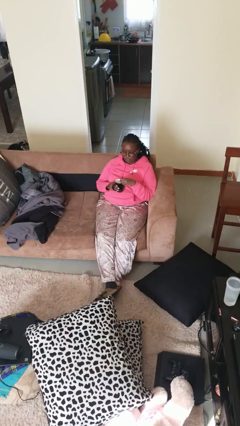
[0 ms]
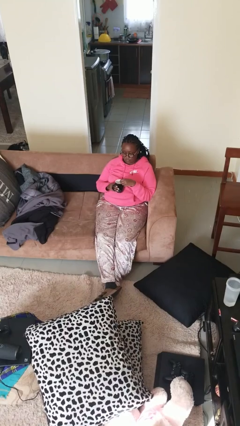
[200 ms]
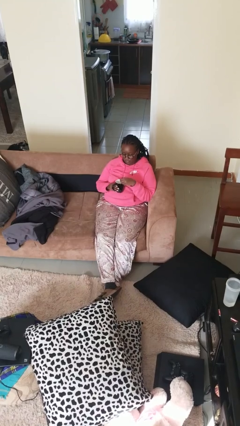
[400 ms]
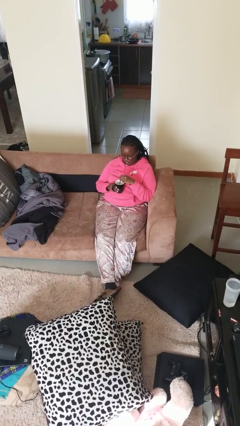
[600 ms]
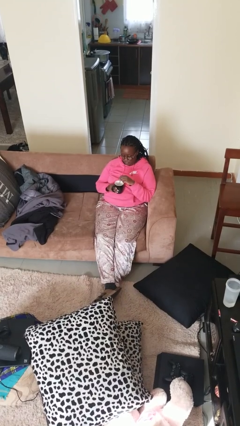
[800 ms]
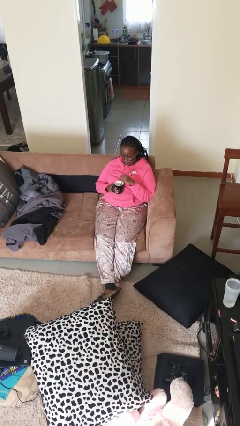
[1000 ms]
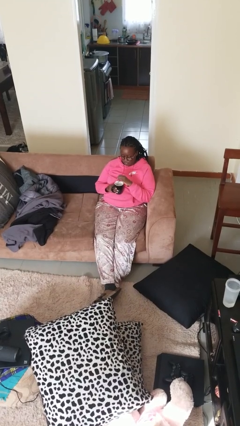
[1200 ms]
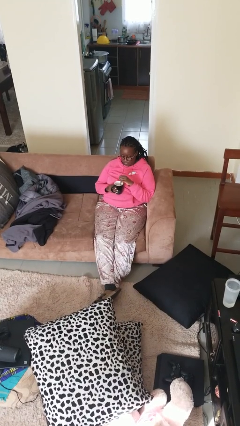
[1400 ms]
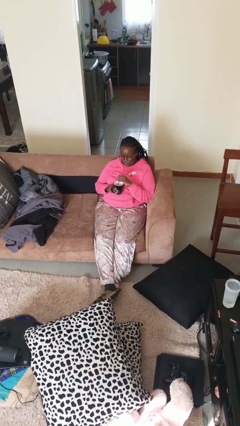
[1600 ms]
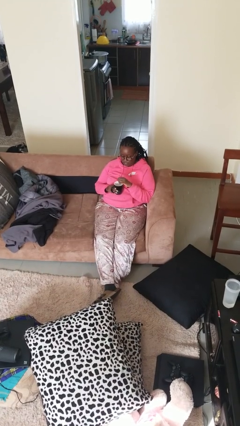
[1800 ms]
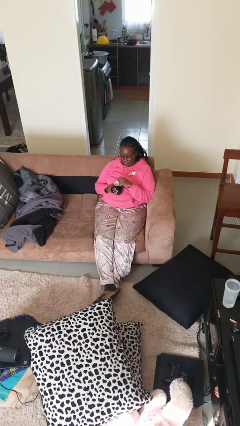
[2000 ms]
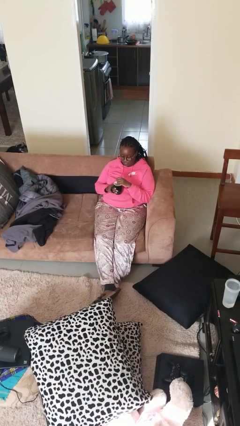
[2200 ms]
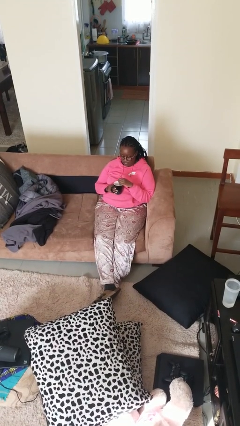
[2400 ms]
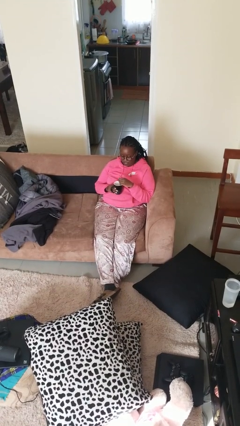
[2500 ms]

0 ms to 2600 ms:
person stirs mug

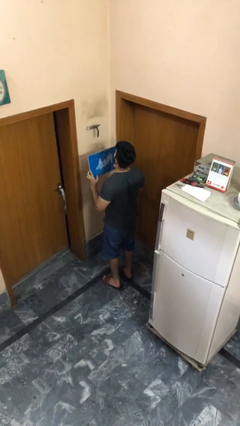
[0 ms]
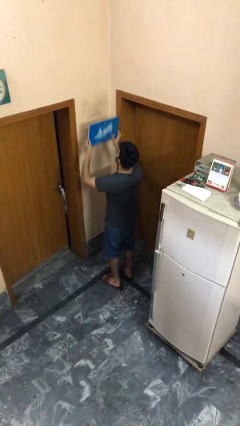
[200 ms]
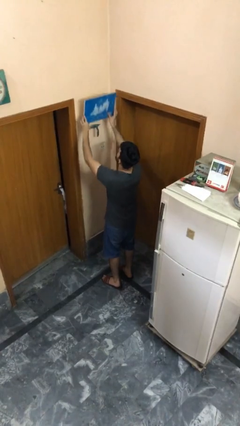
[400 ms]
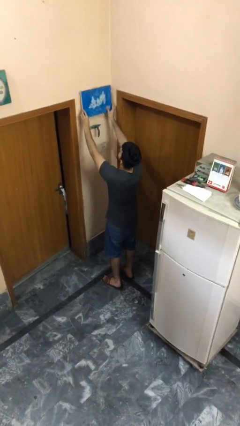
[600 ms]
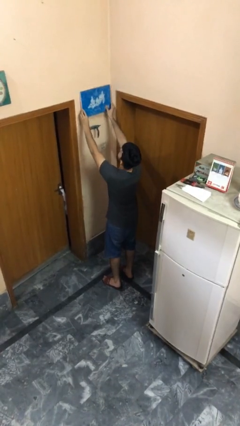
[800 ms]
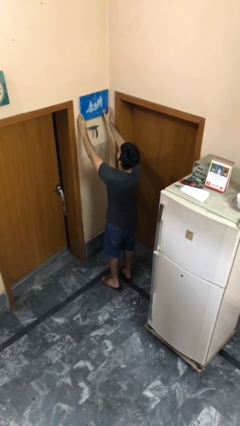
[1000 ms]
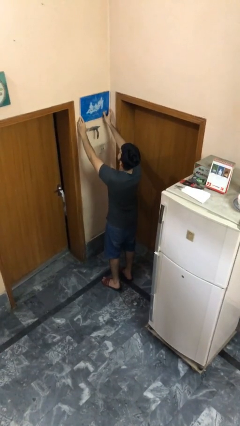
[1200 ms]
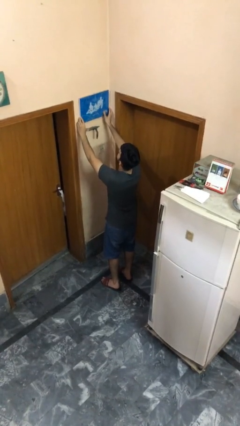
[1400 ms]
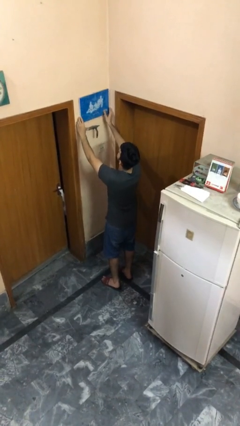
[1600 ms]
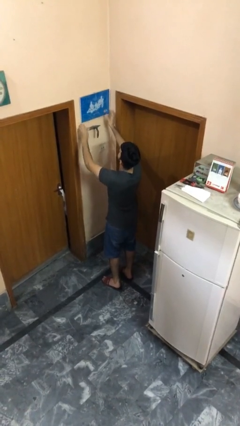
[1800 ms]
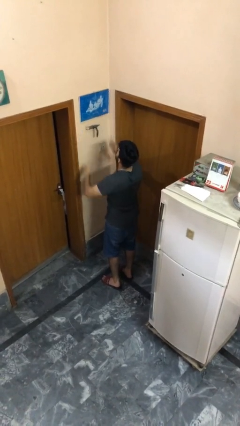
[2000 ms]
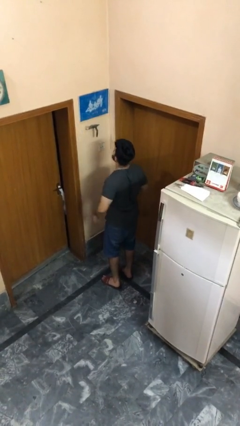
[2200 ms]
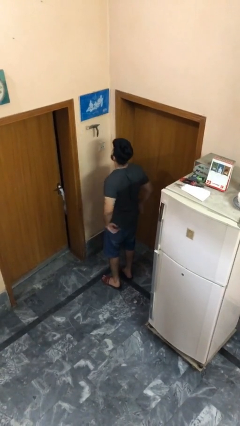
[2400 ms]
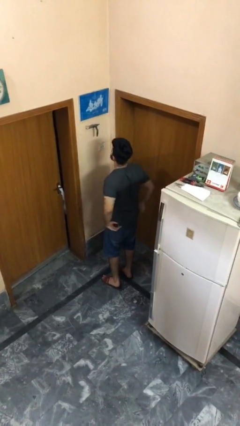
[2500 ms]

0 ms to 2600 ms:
person puts up picture frame

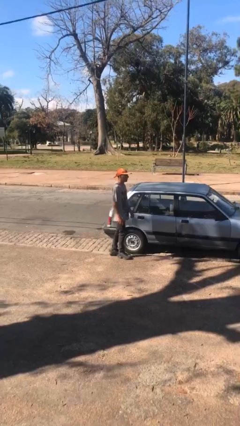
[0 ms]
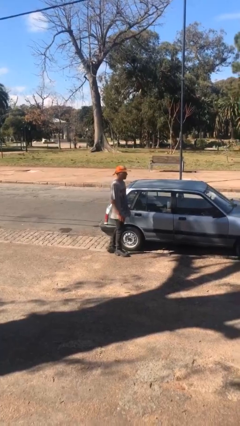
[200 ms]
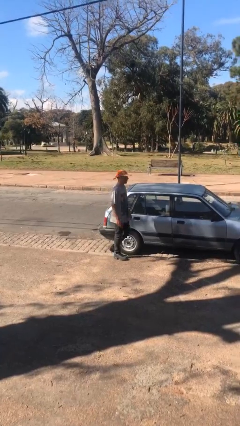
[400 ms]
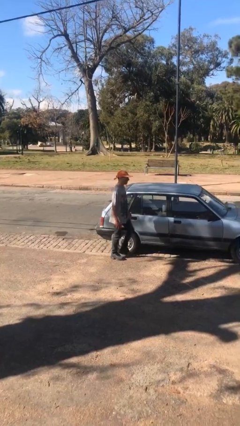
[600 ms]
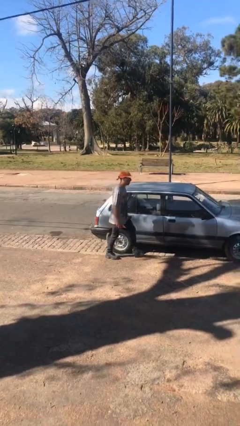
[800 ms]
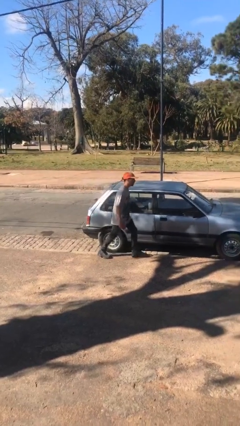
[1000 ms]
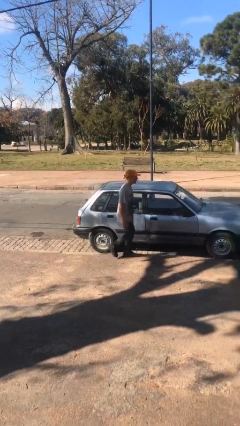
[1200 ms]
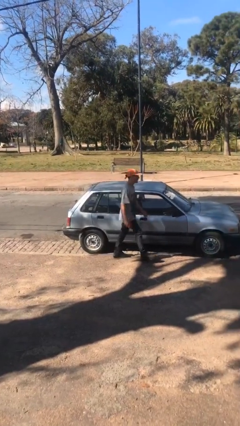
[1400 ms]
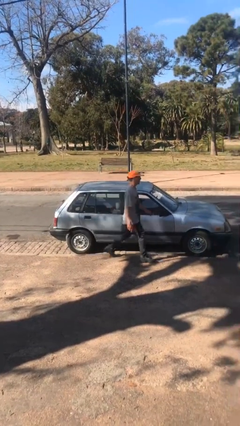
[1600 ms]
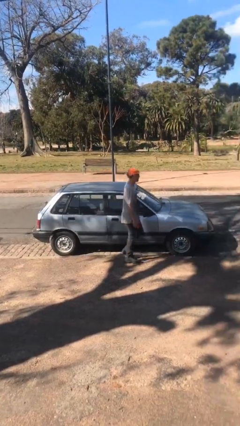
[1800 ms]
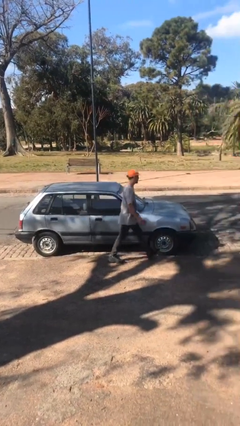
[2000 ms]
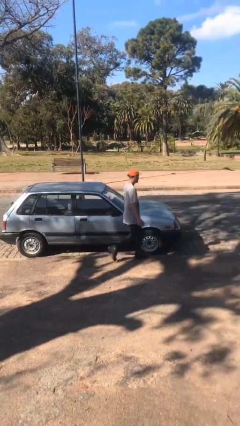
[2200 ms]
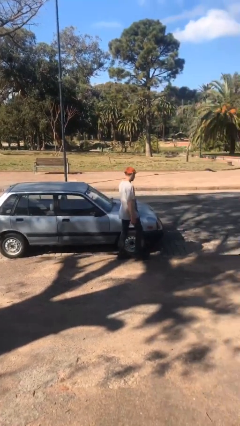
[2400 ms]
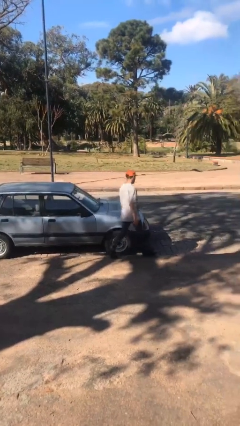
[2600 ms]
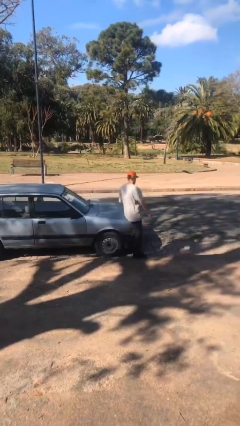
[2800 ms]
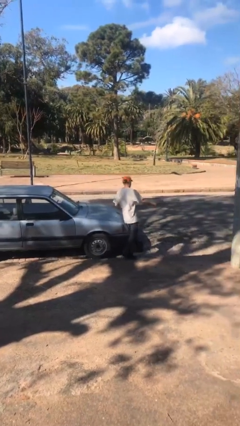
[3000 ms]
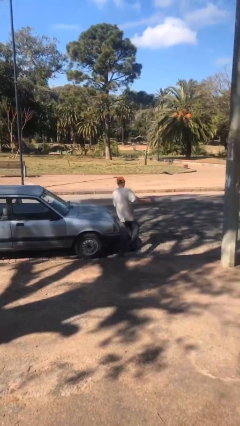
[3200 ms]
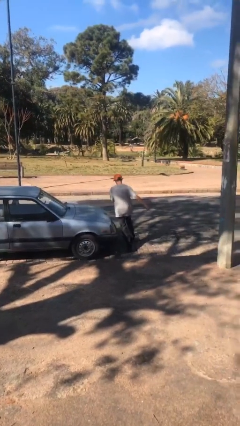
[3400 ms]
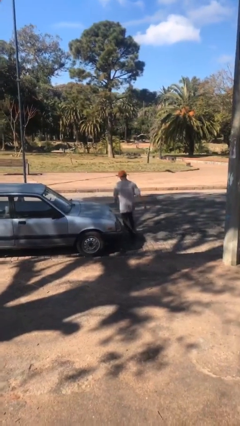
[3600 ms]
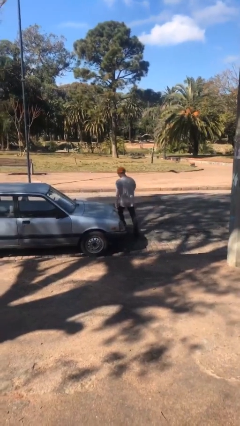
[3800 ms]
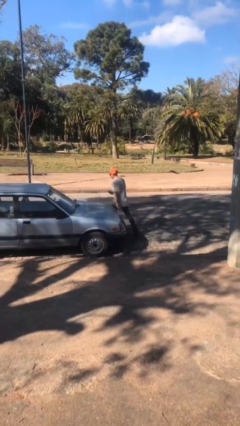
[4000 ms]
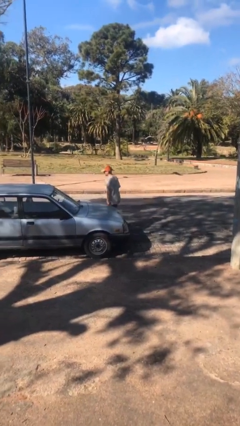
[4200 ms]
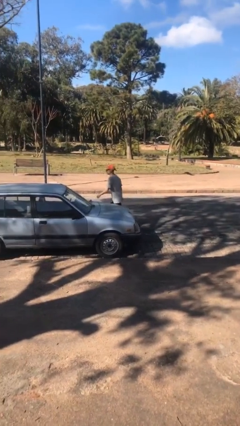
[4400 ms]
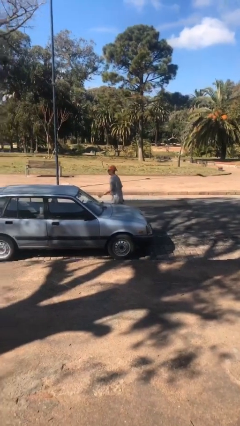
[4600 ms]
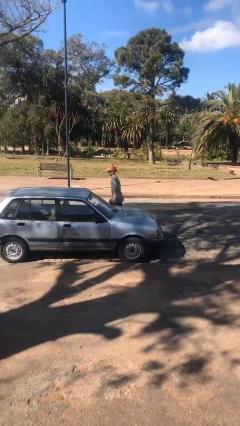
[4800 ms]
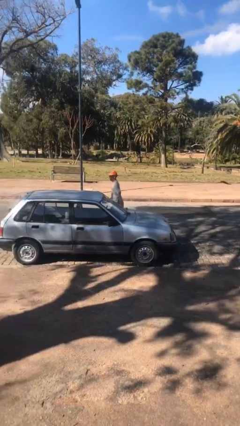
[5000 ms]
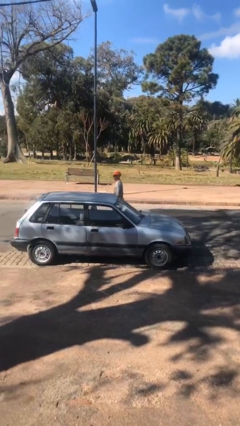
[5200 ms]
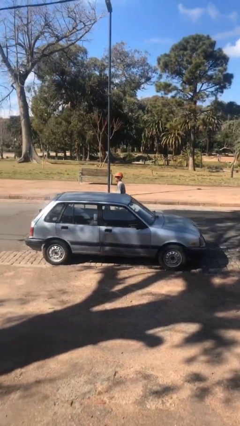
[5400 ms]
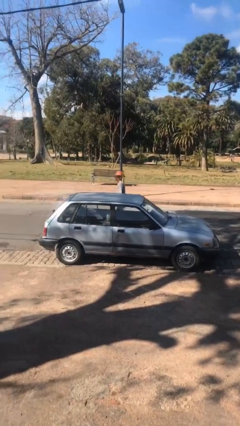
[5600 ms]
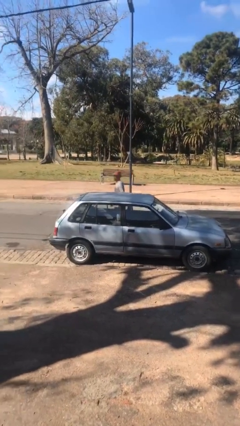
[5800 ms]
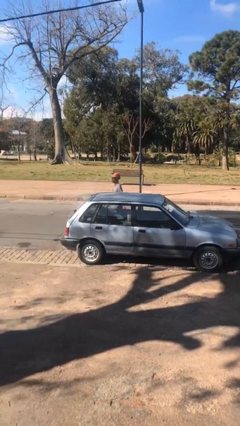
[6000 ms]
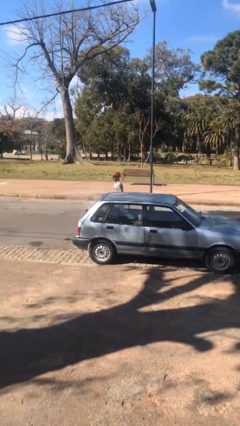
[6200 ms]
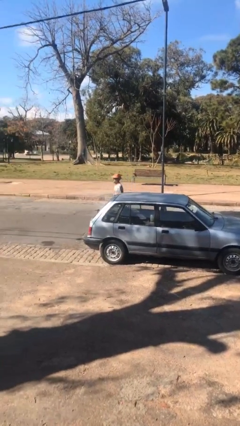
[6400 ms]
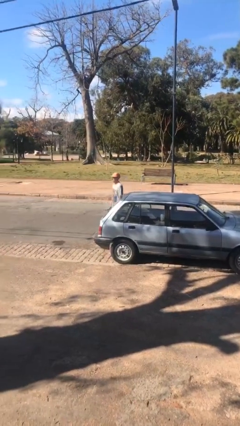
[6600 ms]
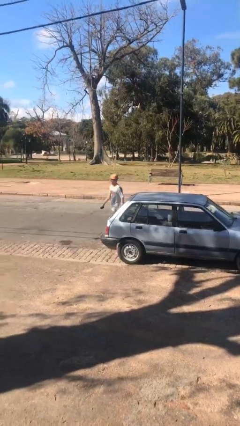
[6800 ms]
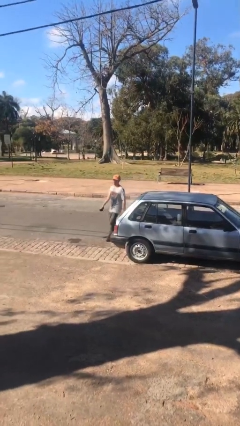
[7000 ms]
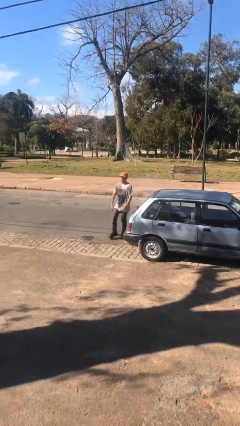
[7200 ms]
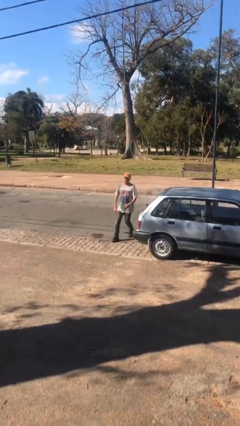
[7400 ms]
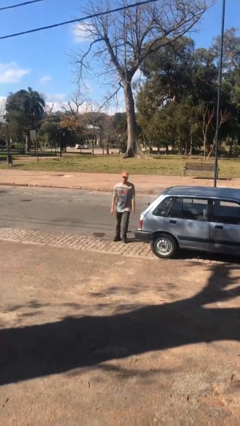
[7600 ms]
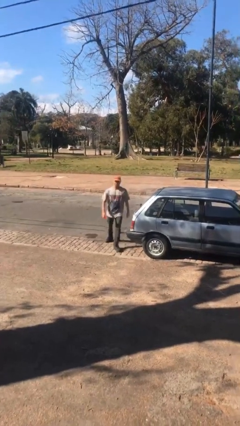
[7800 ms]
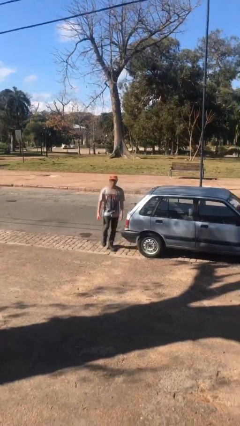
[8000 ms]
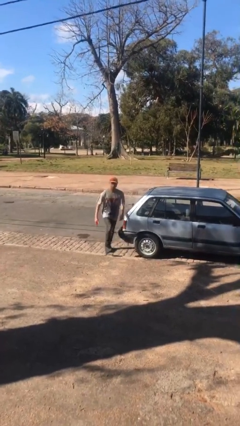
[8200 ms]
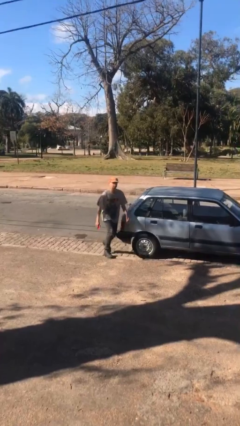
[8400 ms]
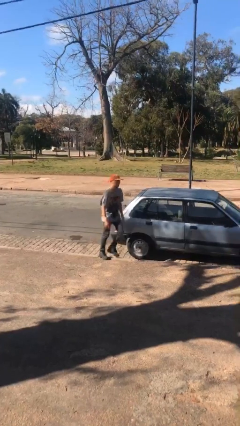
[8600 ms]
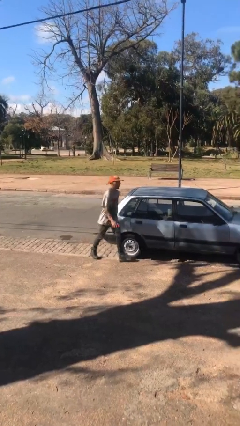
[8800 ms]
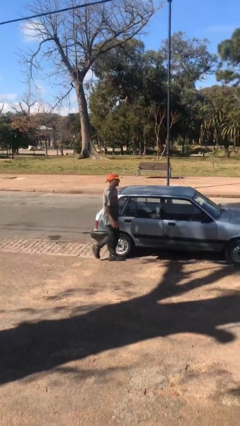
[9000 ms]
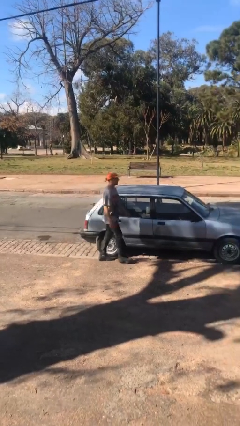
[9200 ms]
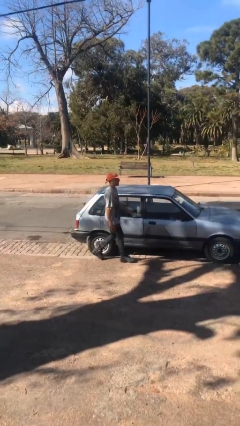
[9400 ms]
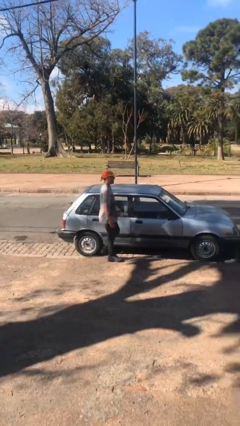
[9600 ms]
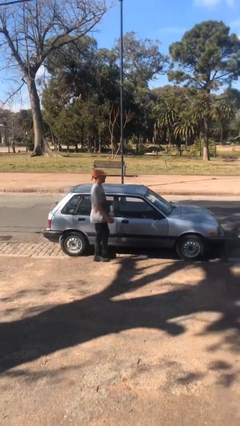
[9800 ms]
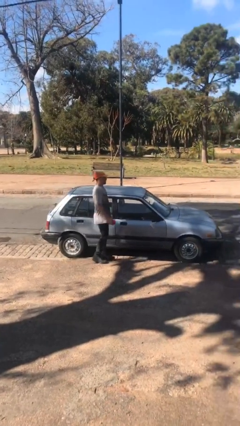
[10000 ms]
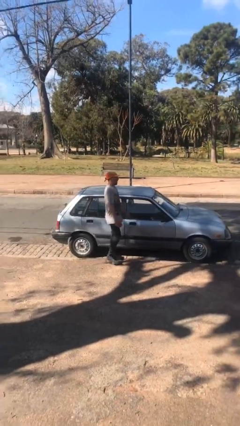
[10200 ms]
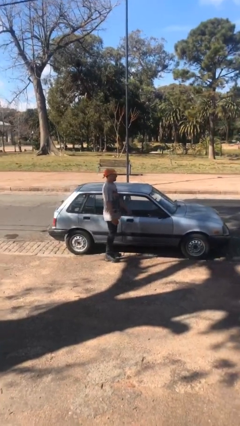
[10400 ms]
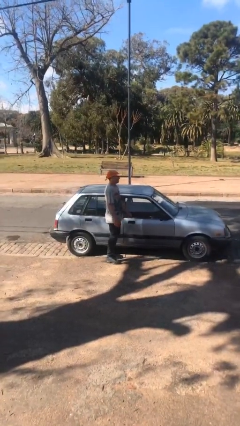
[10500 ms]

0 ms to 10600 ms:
person walks around car

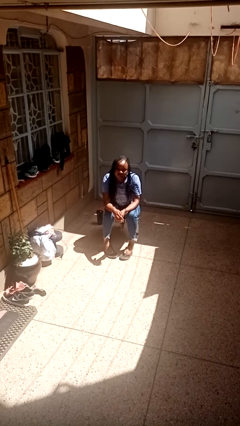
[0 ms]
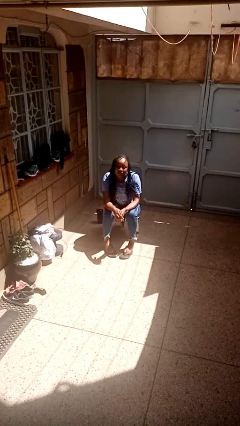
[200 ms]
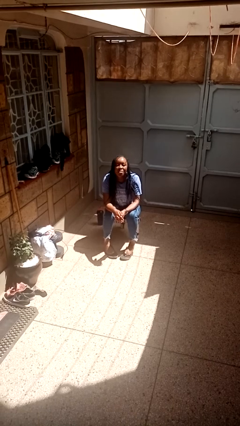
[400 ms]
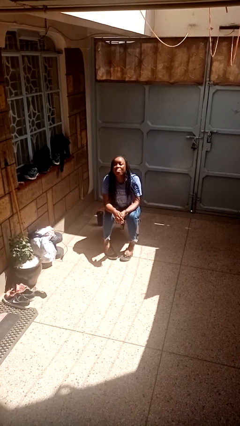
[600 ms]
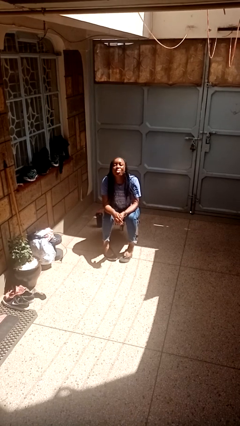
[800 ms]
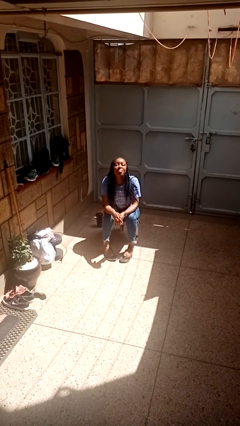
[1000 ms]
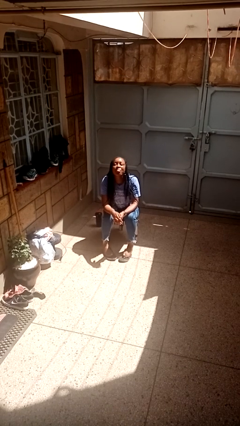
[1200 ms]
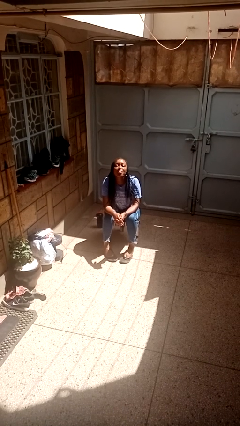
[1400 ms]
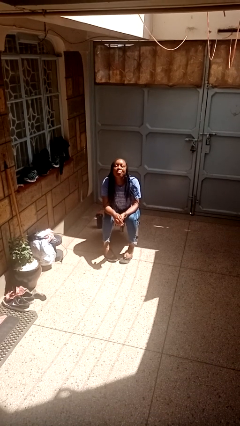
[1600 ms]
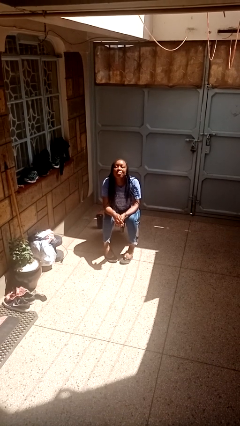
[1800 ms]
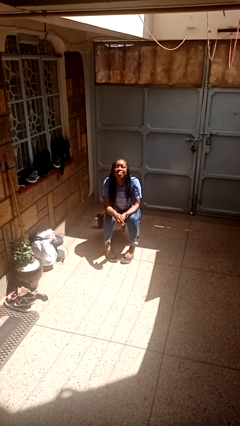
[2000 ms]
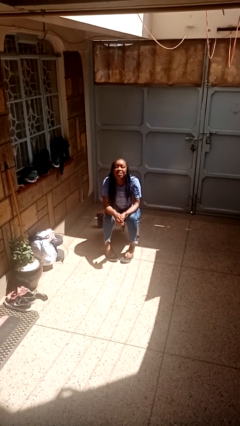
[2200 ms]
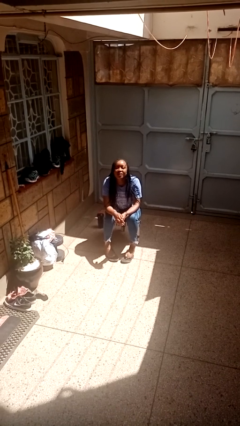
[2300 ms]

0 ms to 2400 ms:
person sticks out tongue
